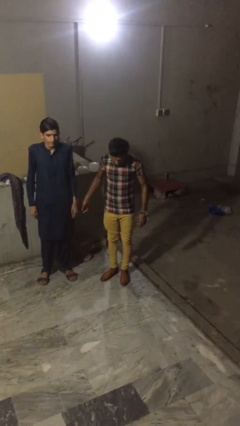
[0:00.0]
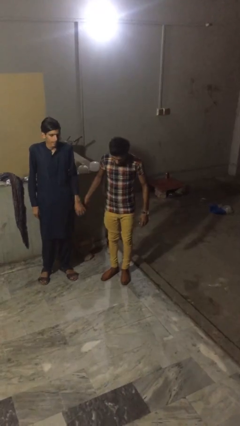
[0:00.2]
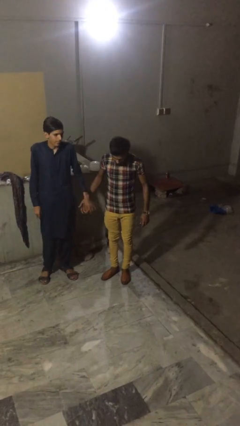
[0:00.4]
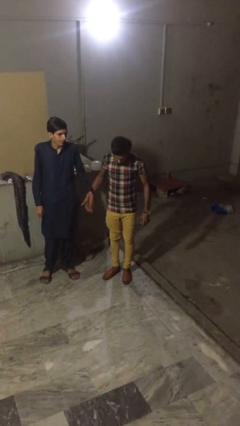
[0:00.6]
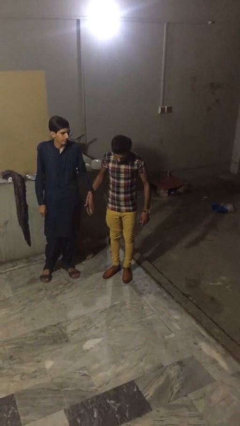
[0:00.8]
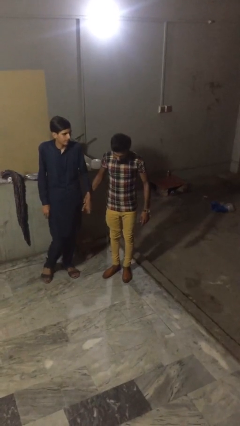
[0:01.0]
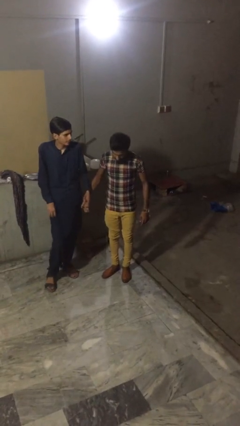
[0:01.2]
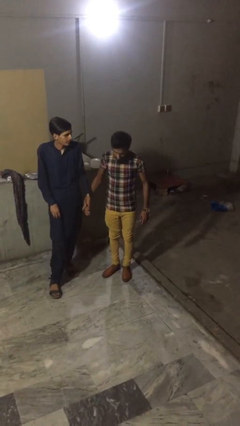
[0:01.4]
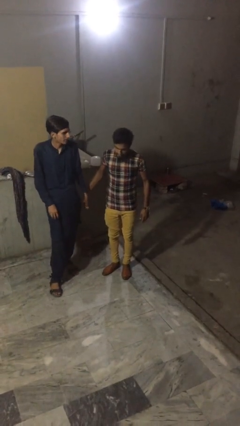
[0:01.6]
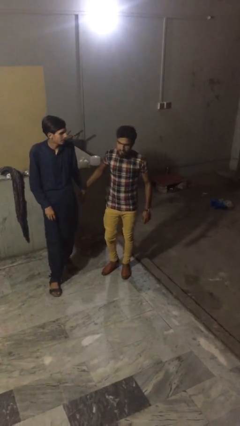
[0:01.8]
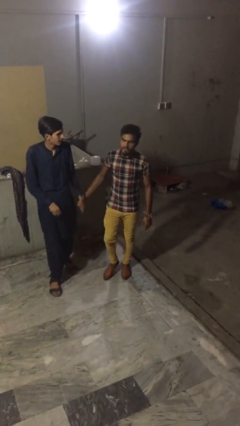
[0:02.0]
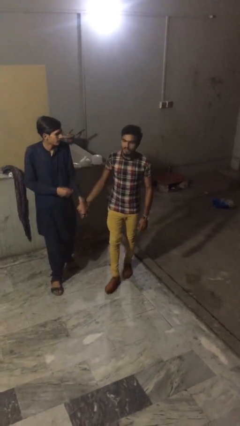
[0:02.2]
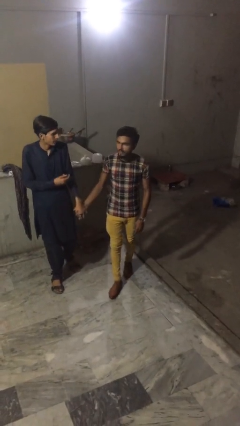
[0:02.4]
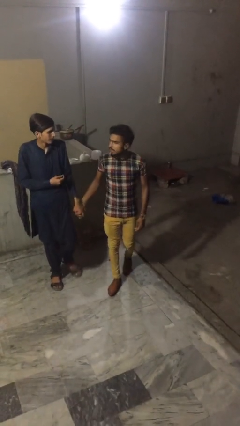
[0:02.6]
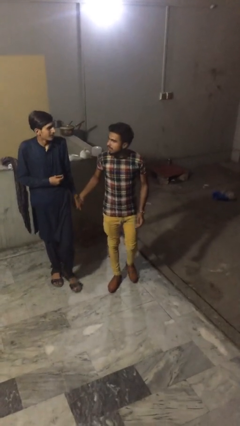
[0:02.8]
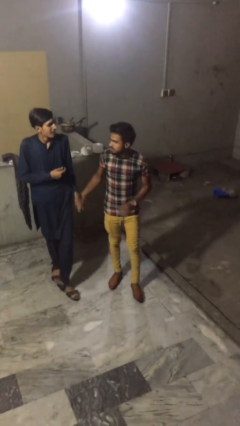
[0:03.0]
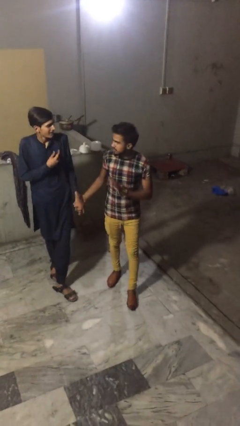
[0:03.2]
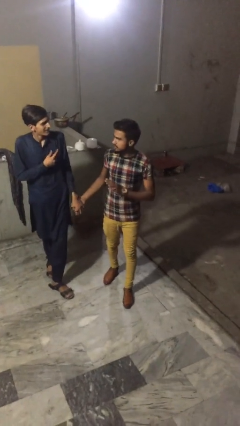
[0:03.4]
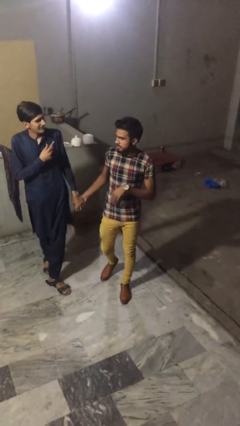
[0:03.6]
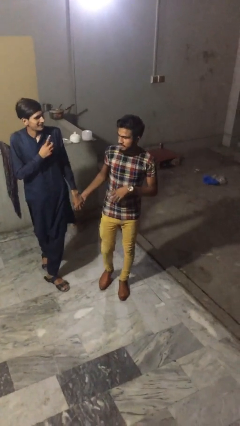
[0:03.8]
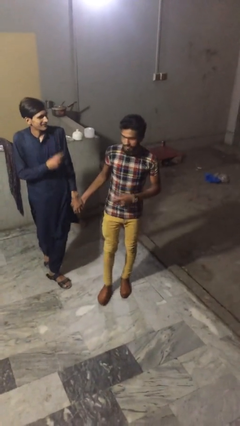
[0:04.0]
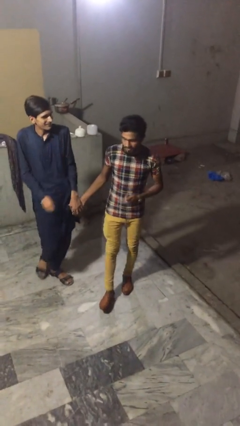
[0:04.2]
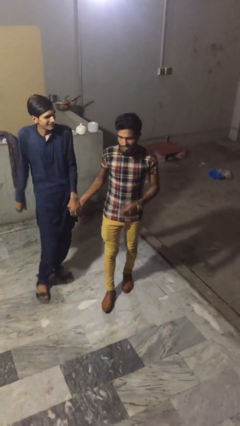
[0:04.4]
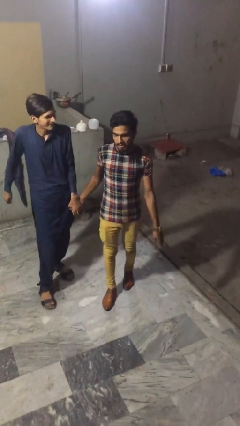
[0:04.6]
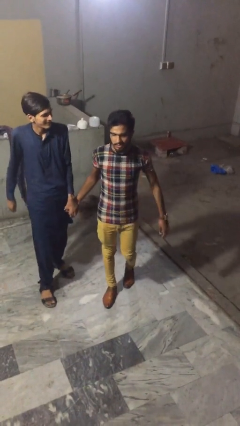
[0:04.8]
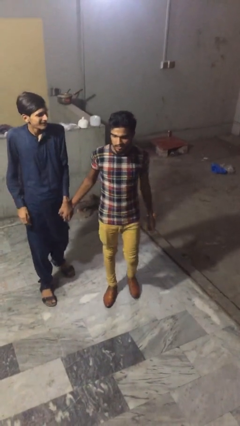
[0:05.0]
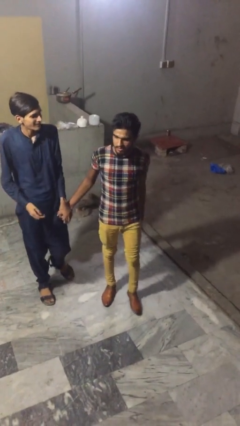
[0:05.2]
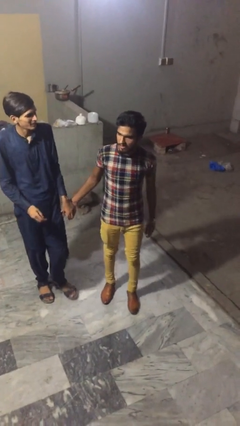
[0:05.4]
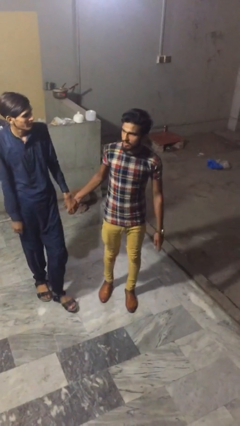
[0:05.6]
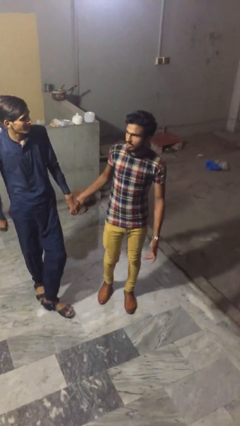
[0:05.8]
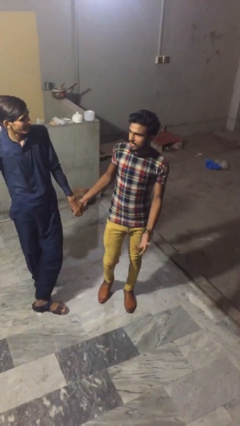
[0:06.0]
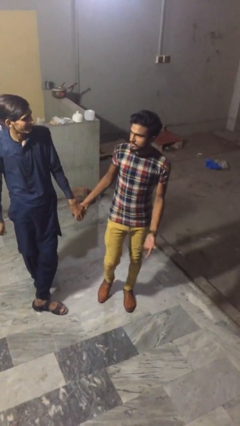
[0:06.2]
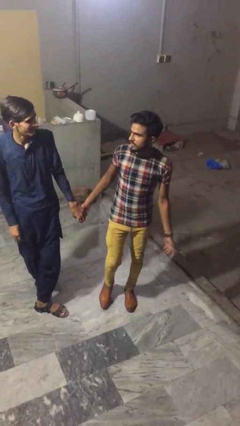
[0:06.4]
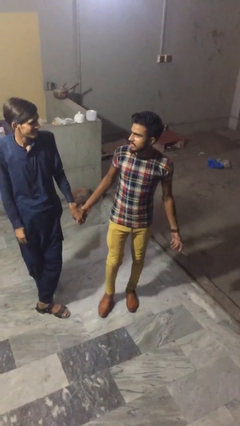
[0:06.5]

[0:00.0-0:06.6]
person holds hand

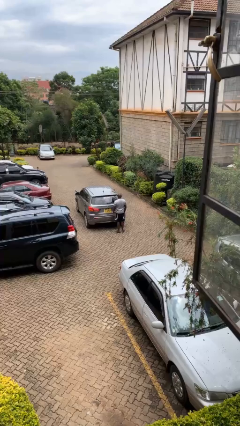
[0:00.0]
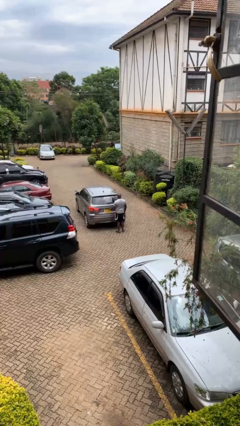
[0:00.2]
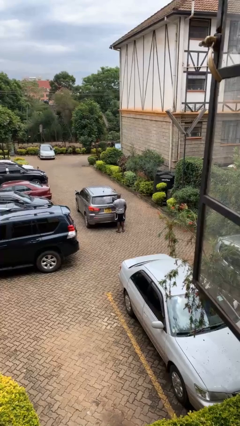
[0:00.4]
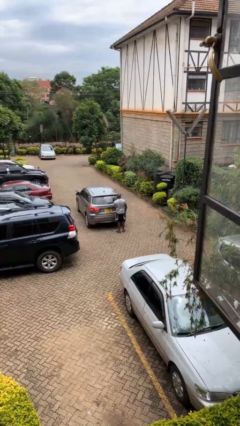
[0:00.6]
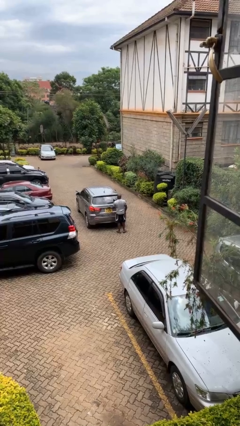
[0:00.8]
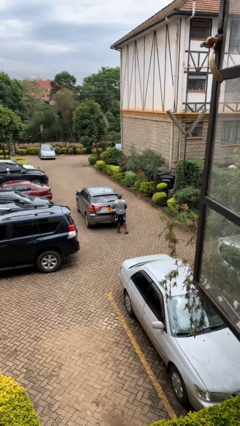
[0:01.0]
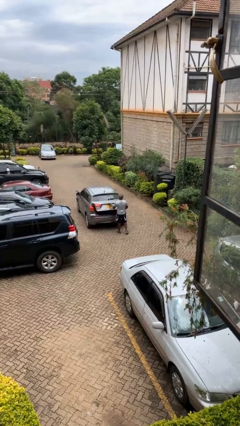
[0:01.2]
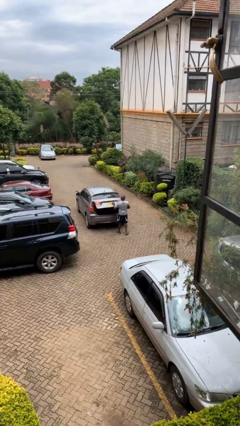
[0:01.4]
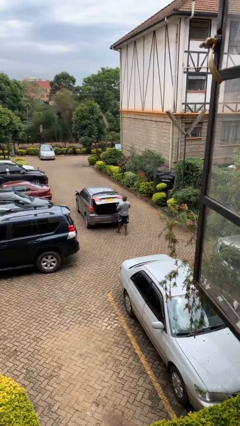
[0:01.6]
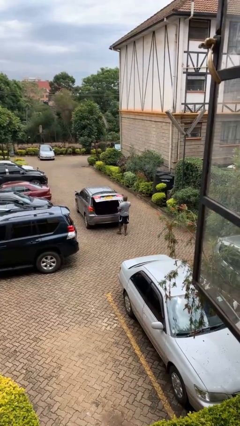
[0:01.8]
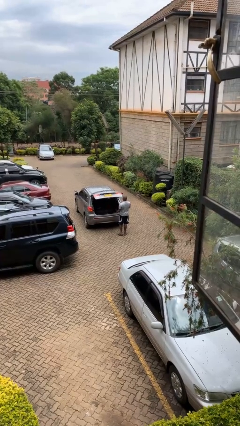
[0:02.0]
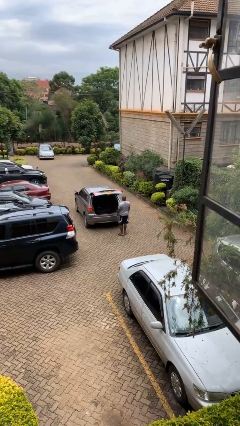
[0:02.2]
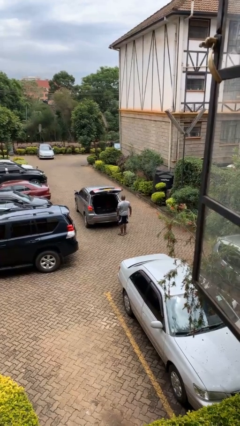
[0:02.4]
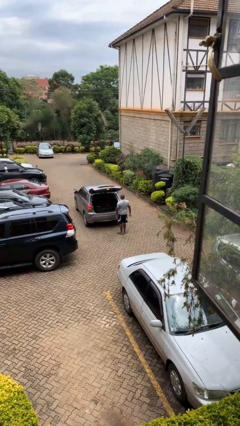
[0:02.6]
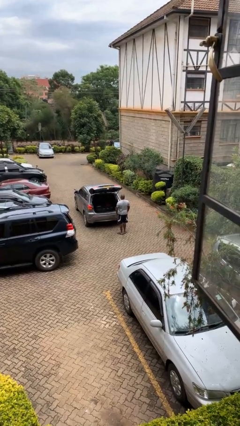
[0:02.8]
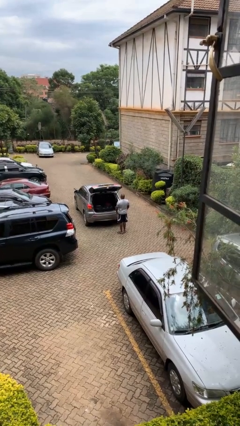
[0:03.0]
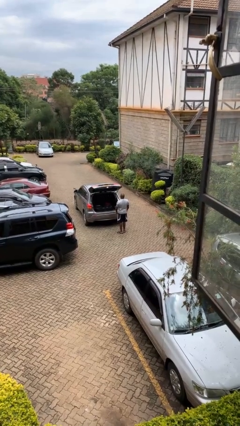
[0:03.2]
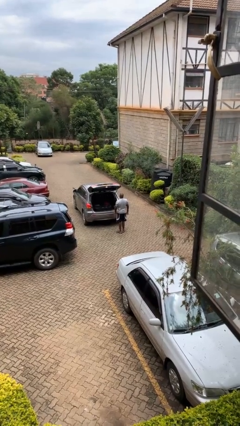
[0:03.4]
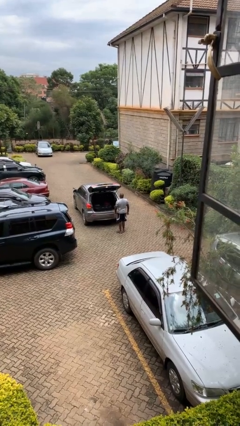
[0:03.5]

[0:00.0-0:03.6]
person opens car trunk

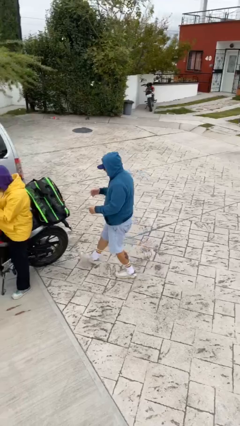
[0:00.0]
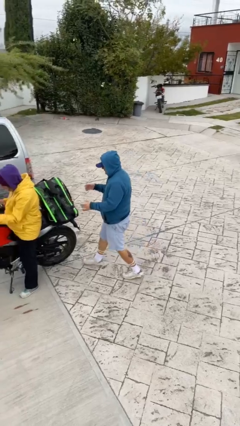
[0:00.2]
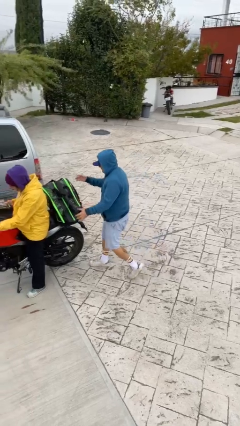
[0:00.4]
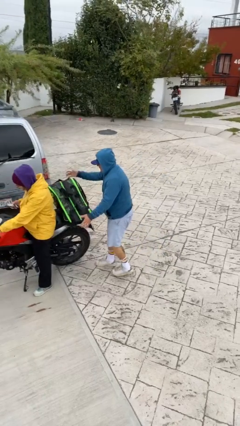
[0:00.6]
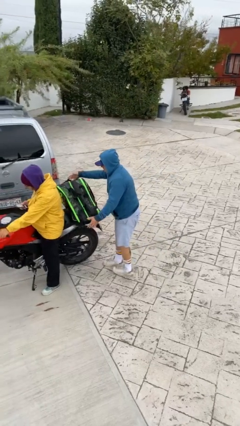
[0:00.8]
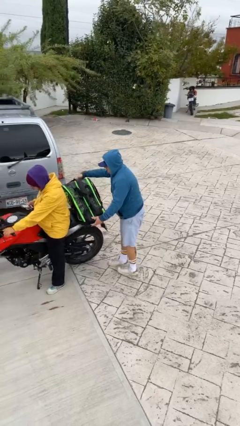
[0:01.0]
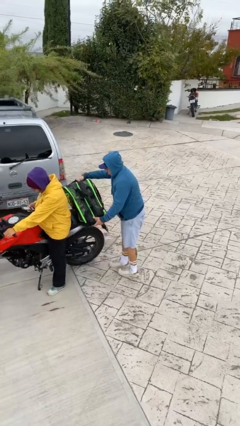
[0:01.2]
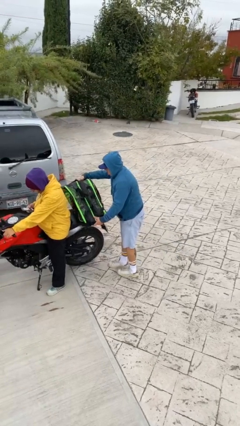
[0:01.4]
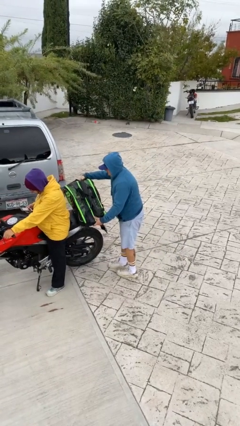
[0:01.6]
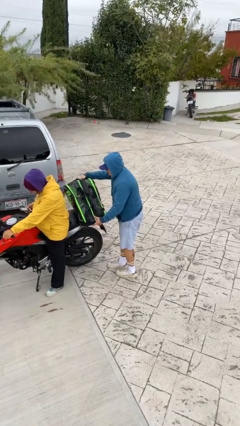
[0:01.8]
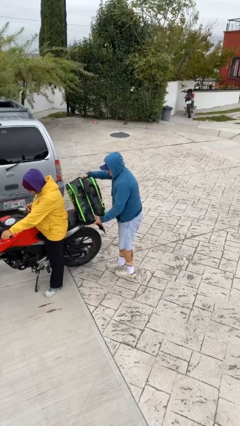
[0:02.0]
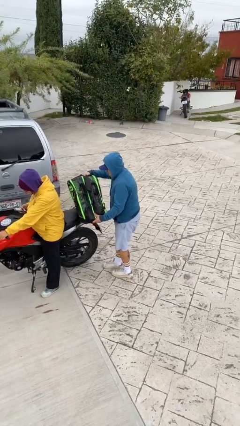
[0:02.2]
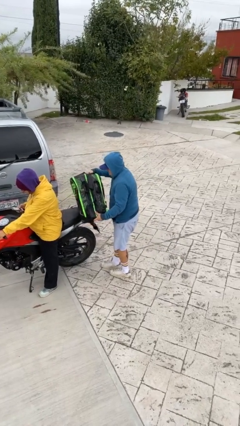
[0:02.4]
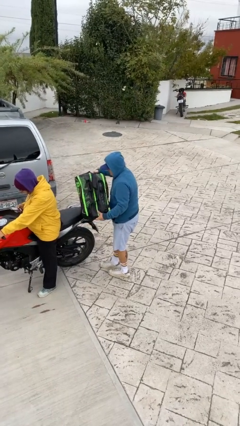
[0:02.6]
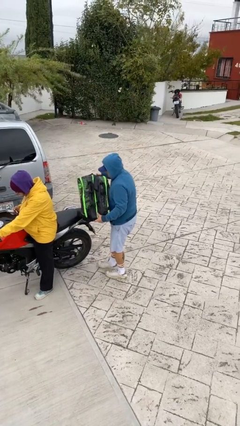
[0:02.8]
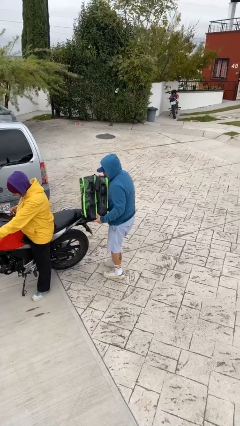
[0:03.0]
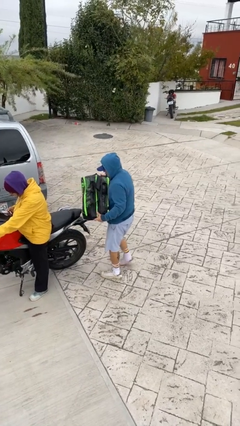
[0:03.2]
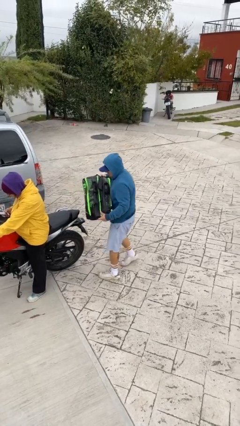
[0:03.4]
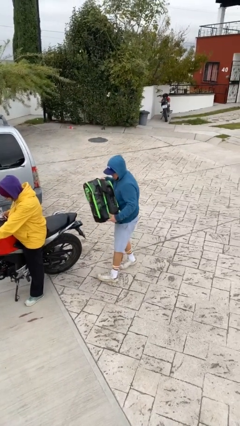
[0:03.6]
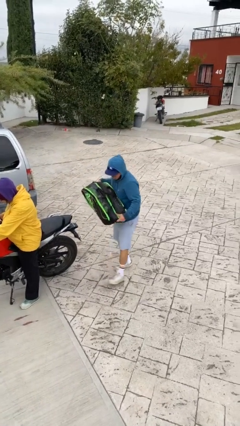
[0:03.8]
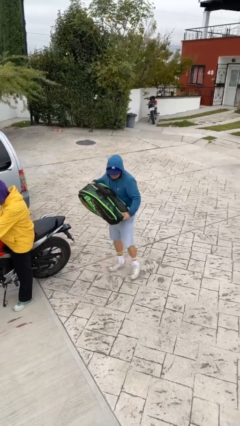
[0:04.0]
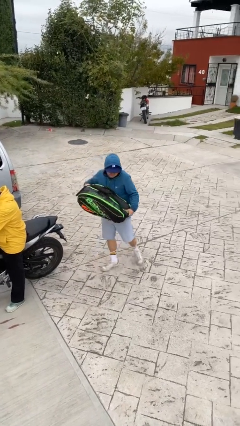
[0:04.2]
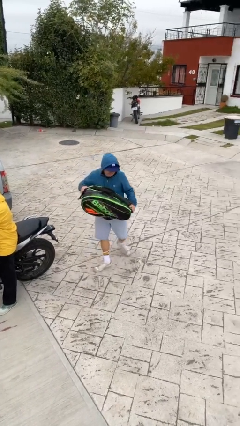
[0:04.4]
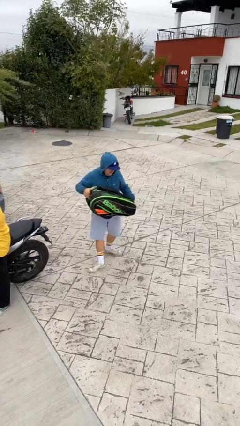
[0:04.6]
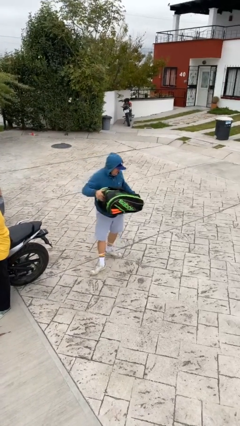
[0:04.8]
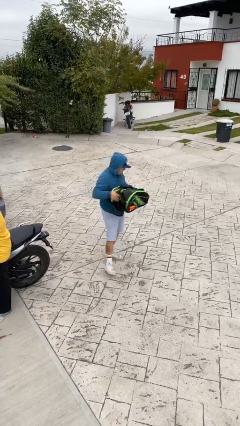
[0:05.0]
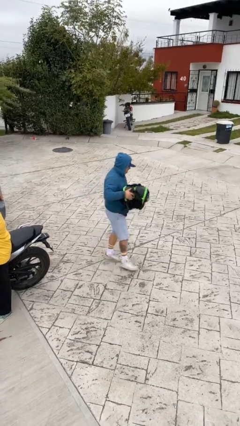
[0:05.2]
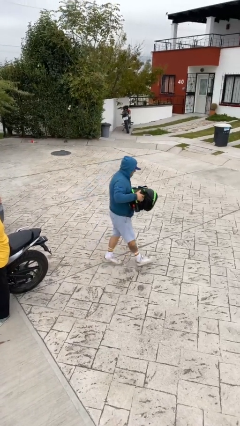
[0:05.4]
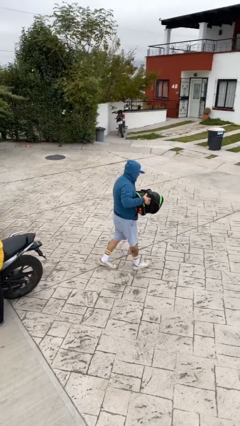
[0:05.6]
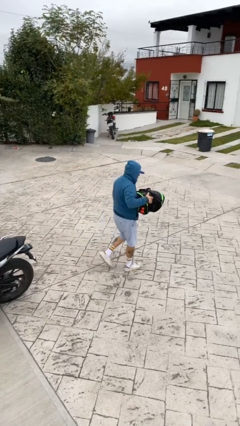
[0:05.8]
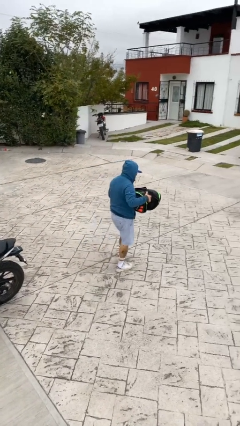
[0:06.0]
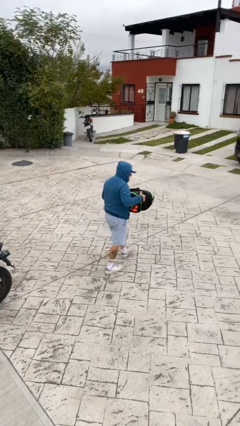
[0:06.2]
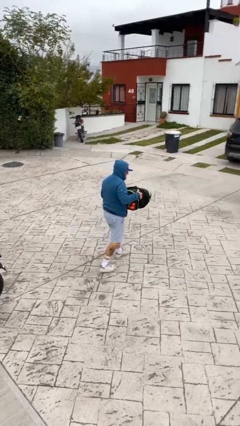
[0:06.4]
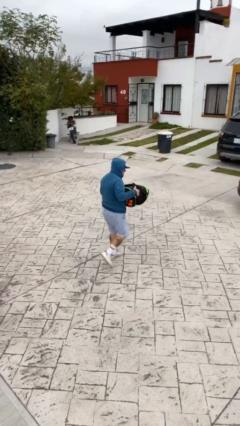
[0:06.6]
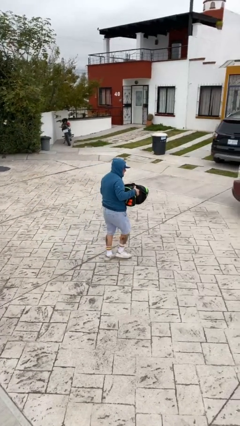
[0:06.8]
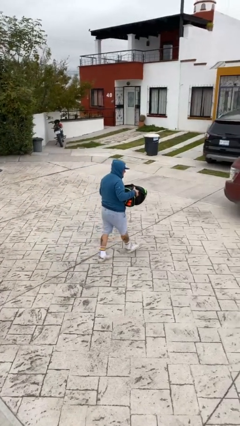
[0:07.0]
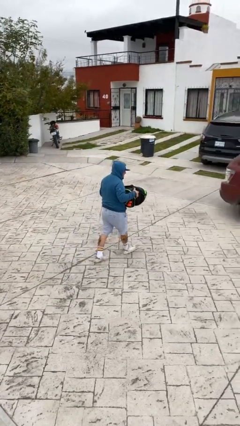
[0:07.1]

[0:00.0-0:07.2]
person steals object from person

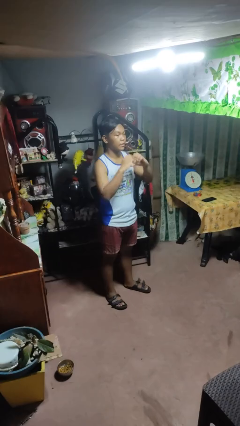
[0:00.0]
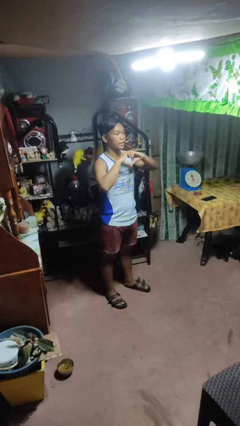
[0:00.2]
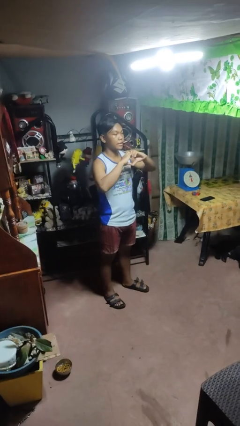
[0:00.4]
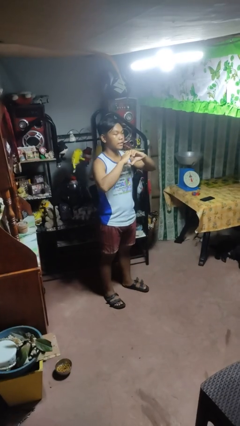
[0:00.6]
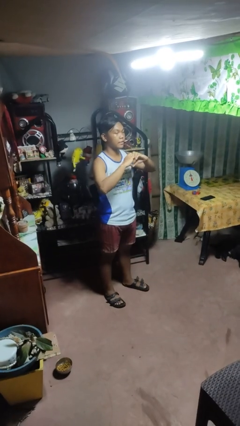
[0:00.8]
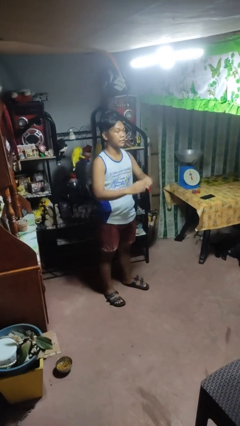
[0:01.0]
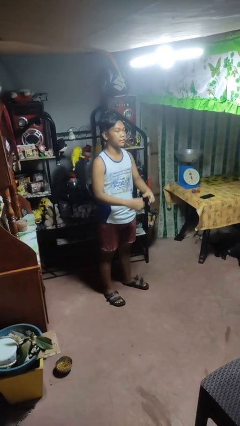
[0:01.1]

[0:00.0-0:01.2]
person gestures heart
